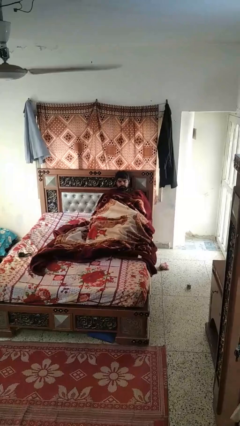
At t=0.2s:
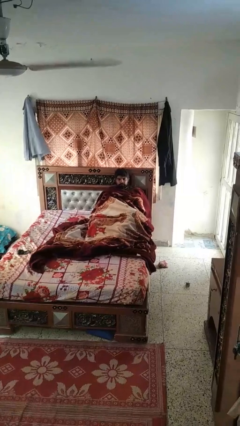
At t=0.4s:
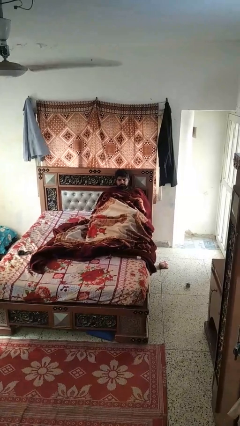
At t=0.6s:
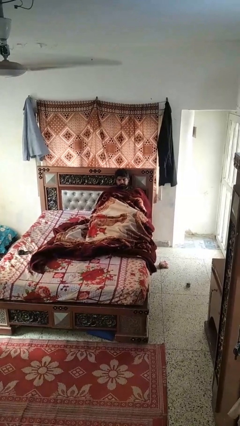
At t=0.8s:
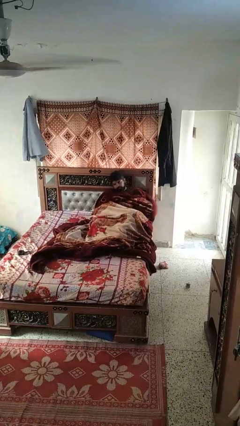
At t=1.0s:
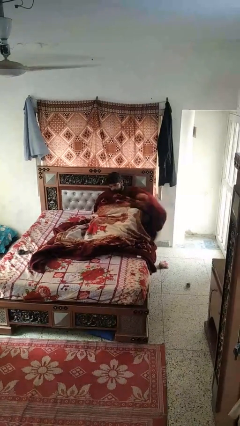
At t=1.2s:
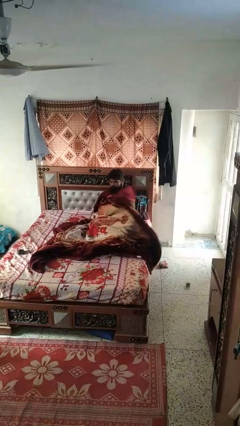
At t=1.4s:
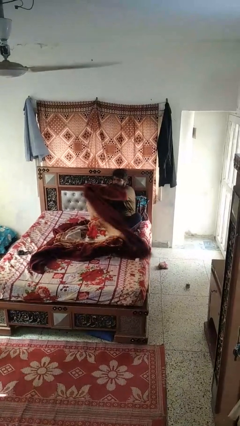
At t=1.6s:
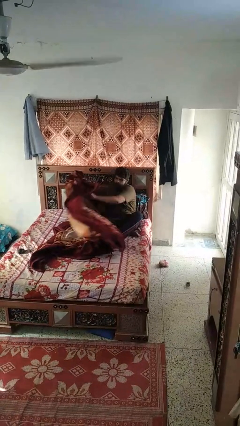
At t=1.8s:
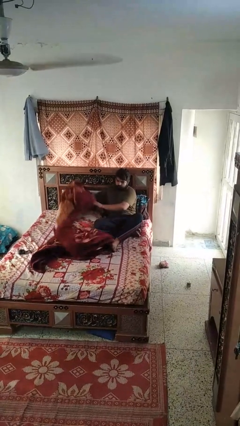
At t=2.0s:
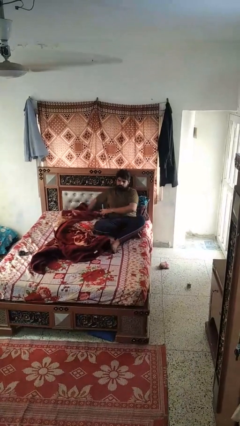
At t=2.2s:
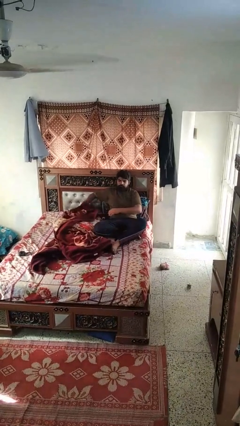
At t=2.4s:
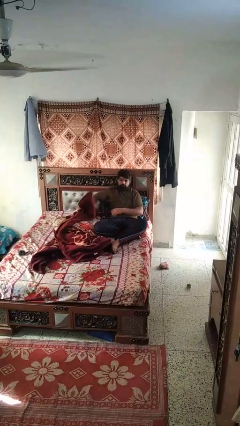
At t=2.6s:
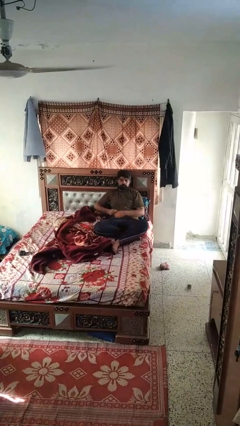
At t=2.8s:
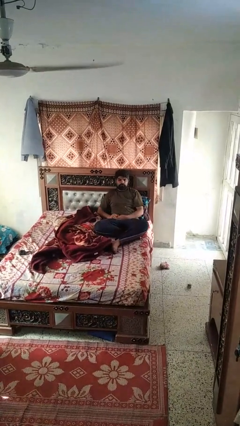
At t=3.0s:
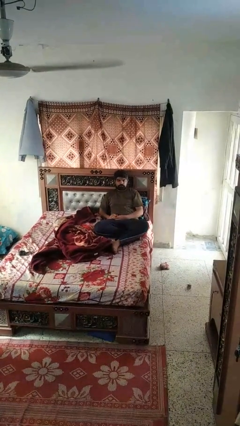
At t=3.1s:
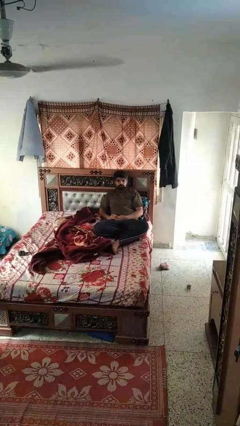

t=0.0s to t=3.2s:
person uncovers with blanket

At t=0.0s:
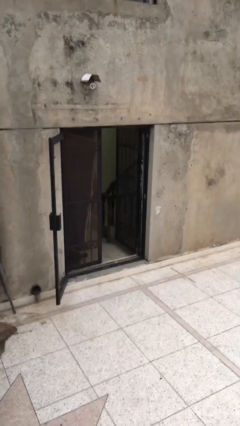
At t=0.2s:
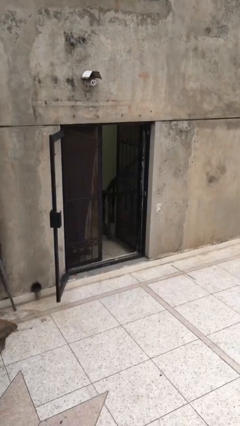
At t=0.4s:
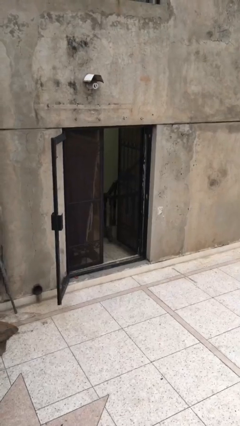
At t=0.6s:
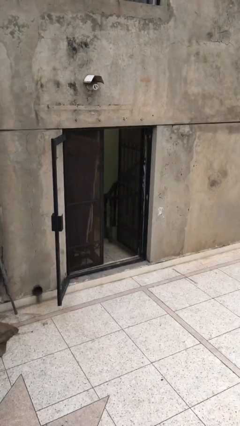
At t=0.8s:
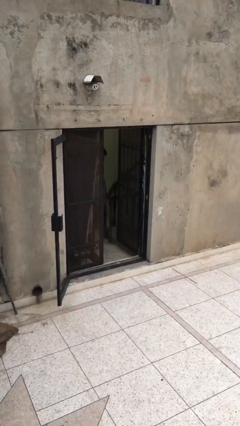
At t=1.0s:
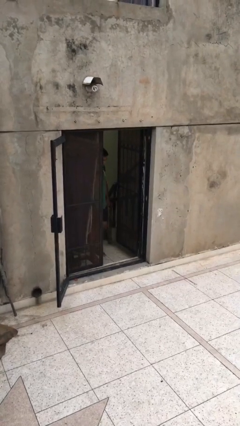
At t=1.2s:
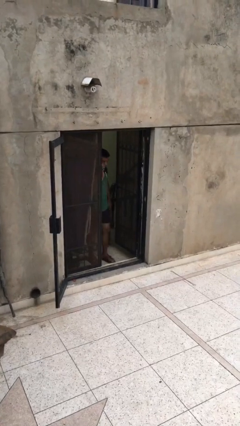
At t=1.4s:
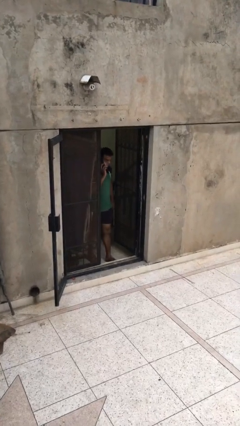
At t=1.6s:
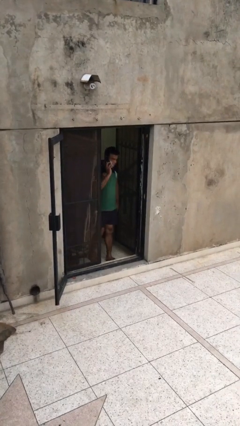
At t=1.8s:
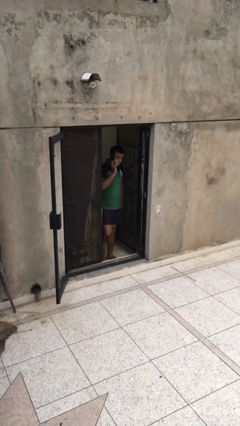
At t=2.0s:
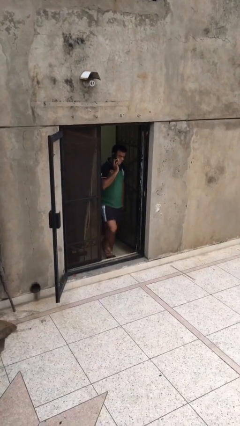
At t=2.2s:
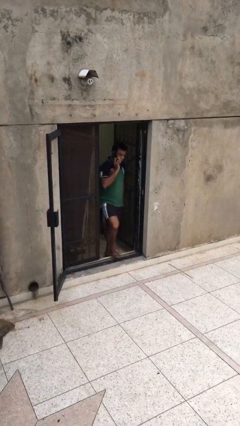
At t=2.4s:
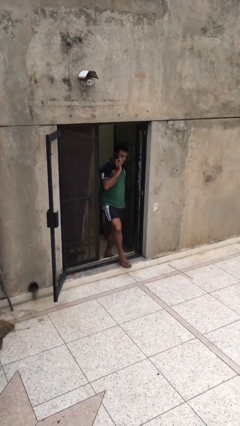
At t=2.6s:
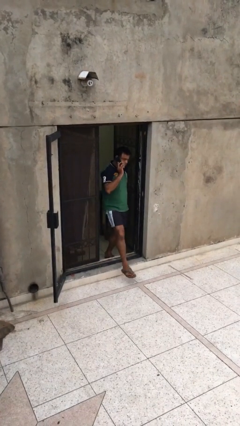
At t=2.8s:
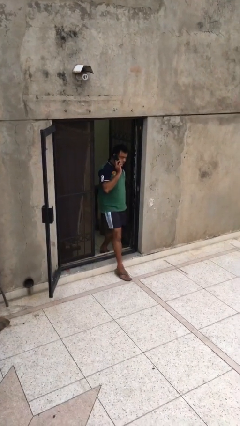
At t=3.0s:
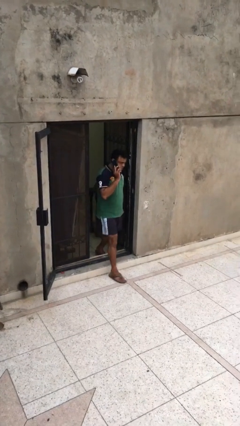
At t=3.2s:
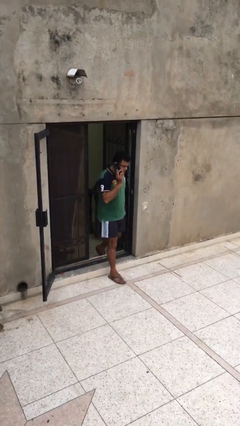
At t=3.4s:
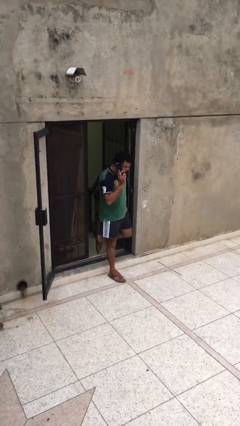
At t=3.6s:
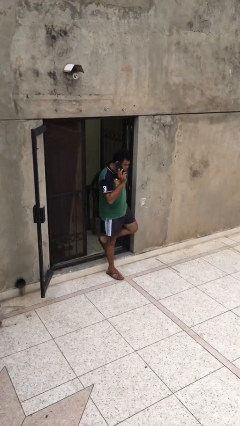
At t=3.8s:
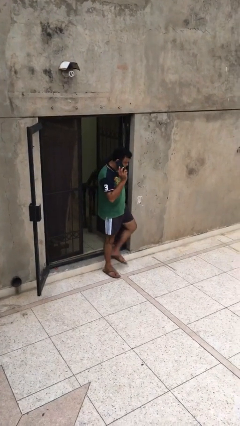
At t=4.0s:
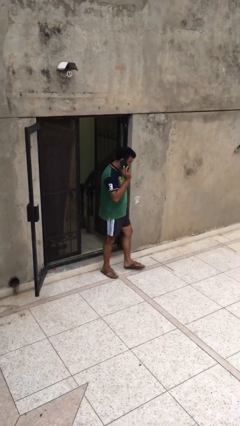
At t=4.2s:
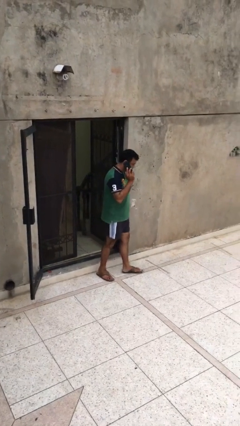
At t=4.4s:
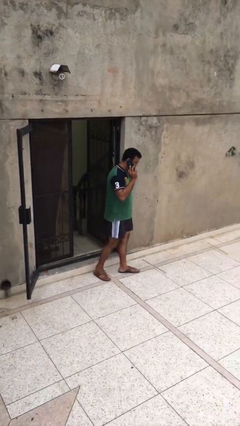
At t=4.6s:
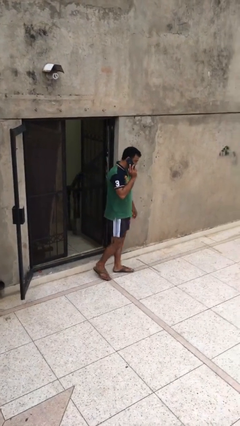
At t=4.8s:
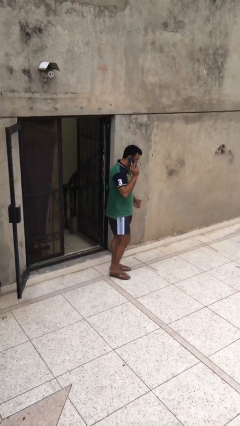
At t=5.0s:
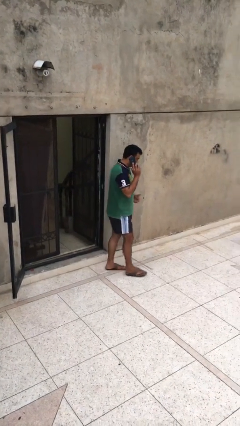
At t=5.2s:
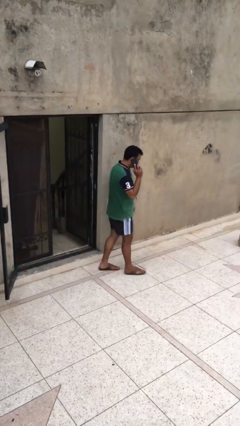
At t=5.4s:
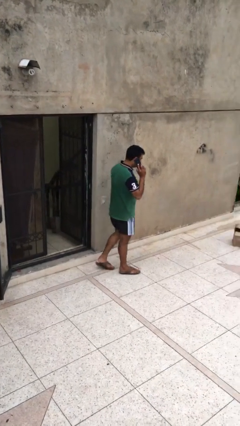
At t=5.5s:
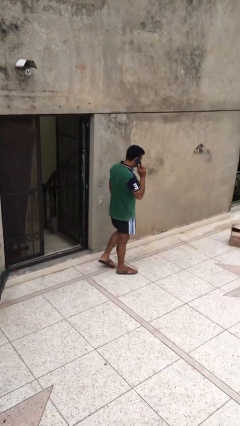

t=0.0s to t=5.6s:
person enters scene through structure

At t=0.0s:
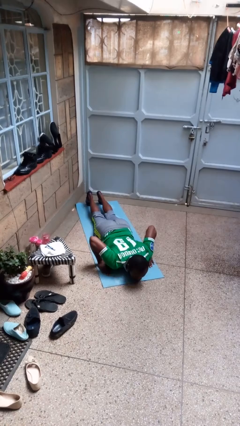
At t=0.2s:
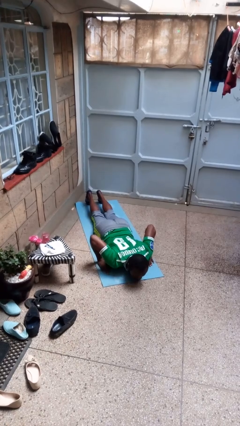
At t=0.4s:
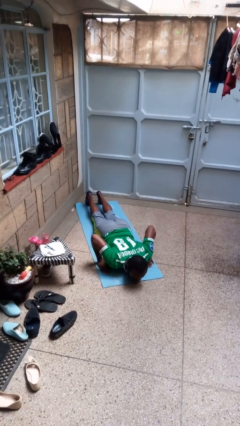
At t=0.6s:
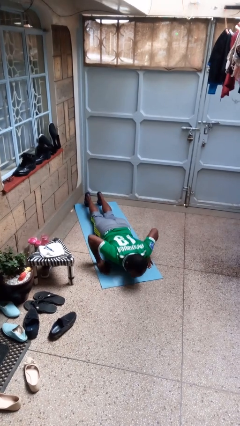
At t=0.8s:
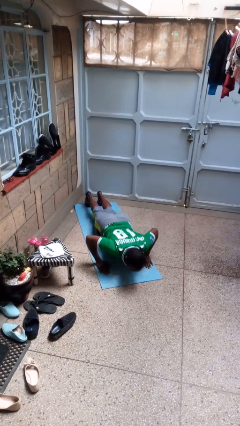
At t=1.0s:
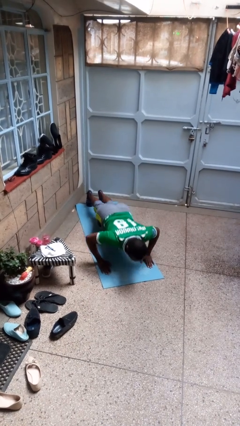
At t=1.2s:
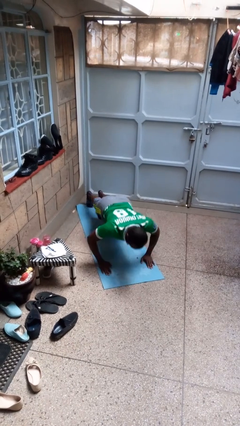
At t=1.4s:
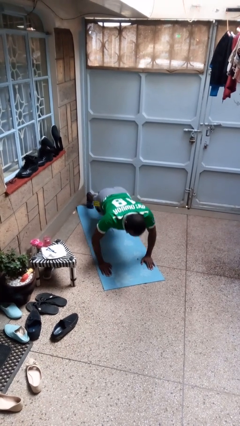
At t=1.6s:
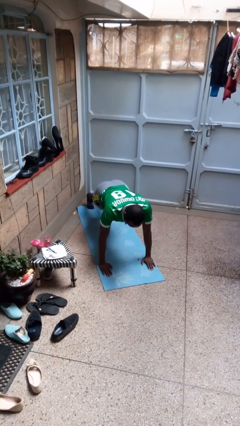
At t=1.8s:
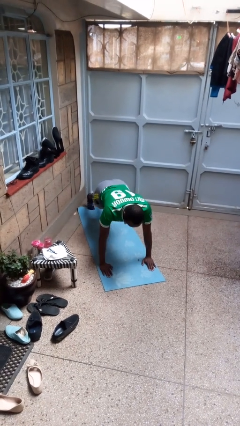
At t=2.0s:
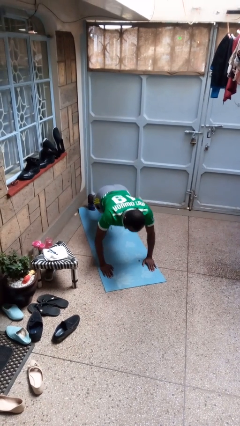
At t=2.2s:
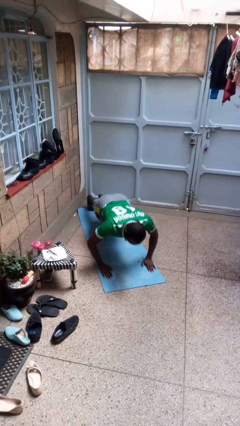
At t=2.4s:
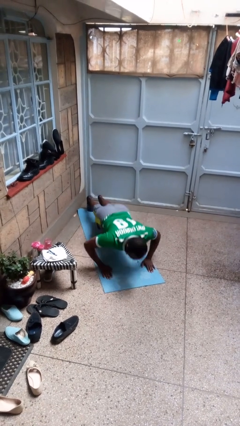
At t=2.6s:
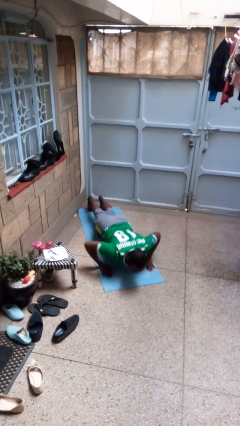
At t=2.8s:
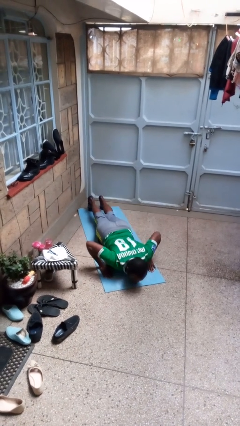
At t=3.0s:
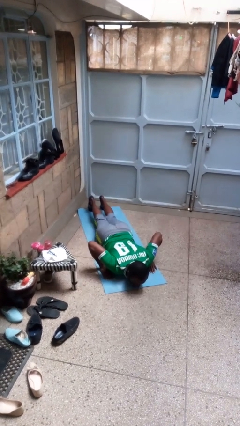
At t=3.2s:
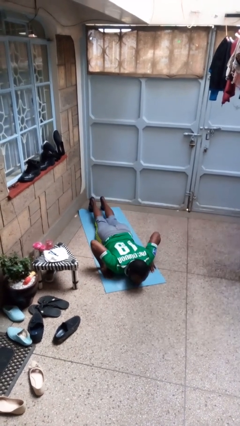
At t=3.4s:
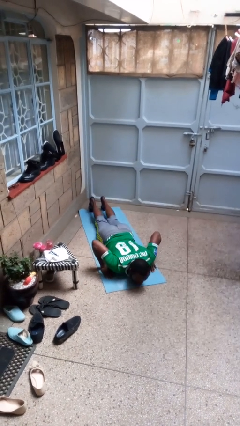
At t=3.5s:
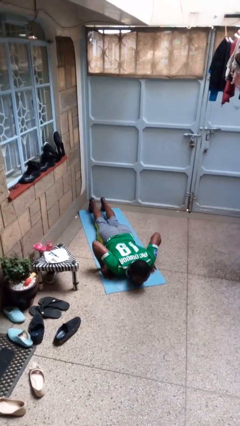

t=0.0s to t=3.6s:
person exercises with pushup

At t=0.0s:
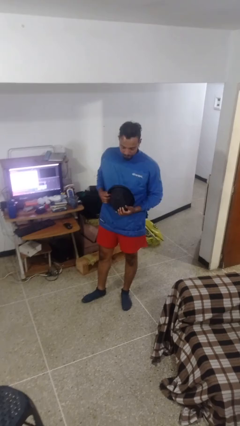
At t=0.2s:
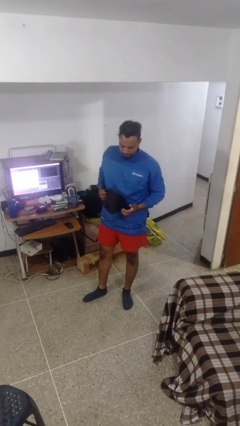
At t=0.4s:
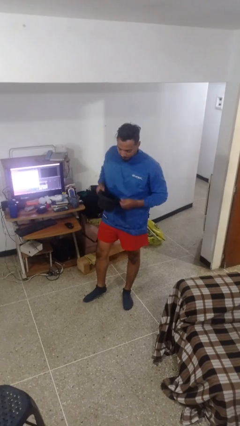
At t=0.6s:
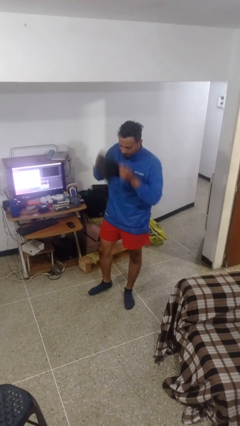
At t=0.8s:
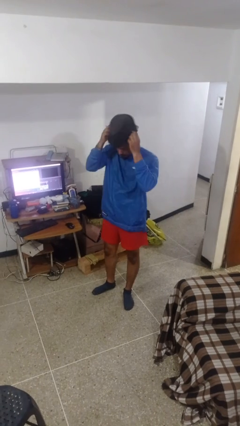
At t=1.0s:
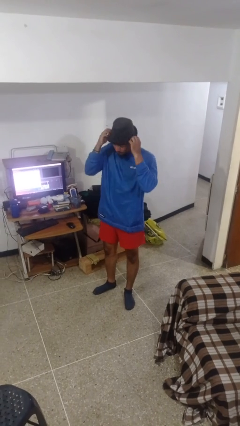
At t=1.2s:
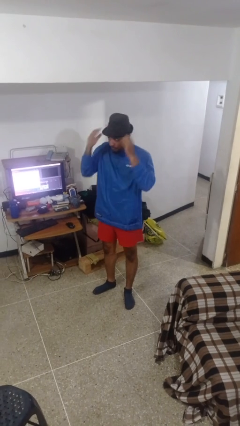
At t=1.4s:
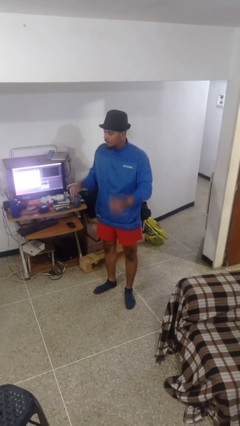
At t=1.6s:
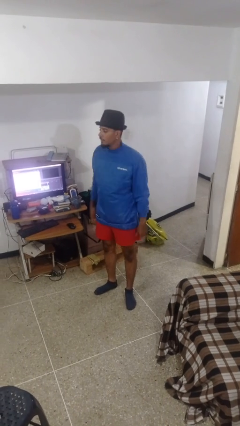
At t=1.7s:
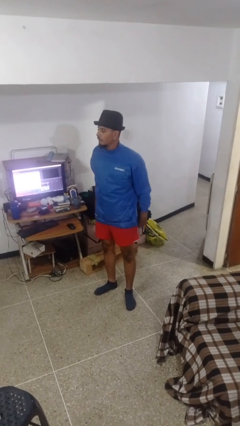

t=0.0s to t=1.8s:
person puts on hat

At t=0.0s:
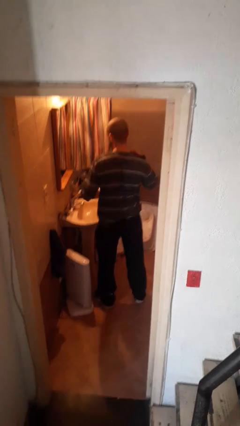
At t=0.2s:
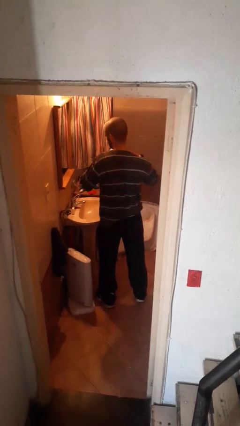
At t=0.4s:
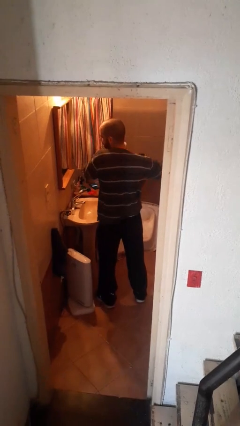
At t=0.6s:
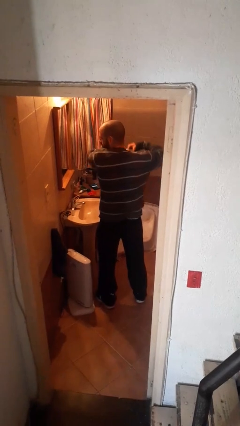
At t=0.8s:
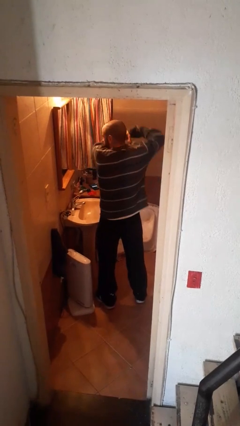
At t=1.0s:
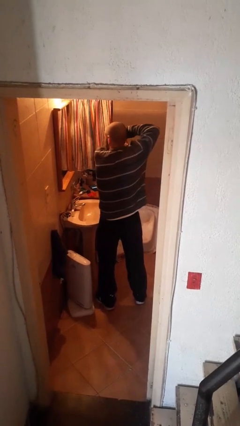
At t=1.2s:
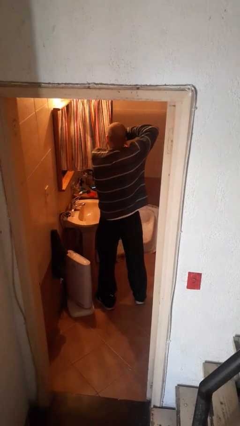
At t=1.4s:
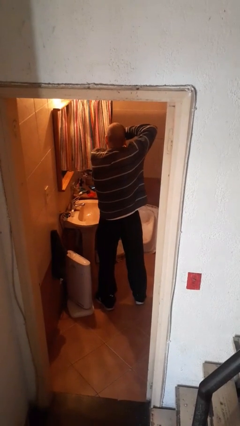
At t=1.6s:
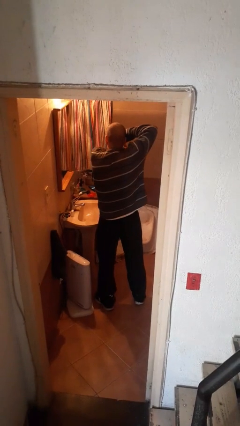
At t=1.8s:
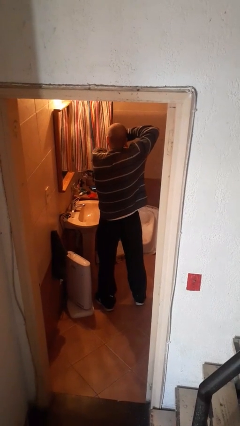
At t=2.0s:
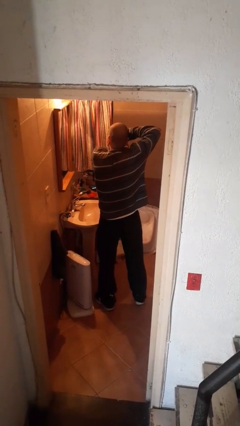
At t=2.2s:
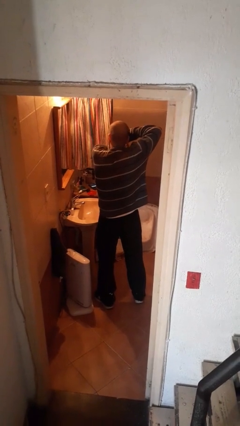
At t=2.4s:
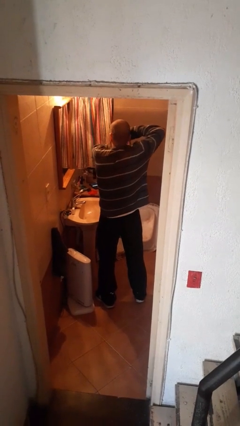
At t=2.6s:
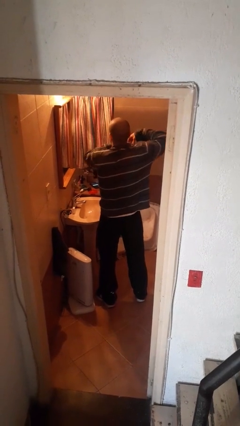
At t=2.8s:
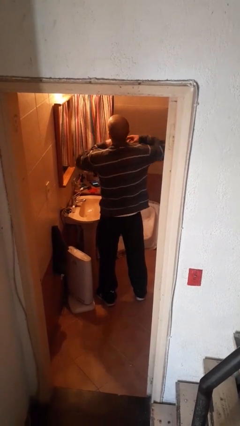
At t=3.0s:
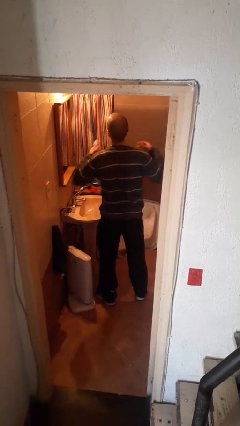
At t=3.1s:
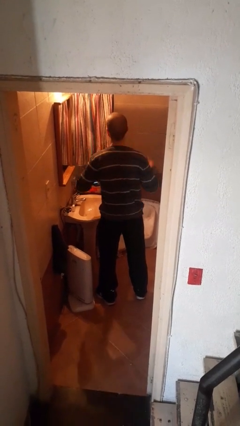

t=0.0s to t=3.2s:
person applies deodorant
